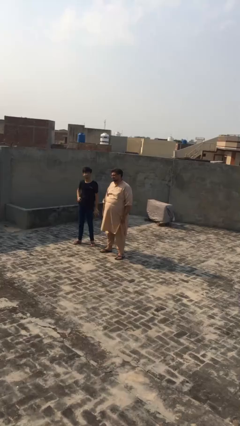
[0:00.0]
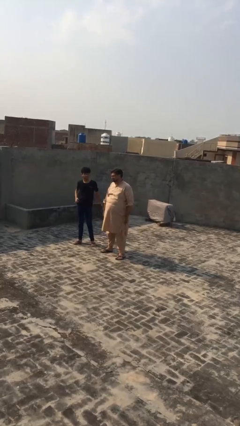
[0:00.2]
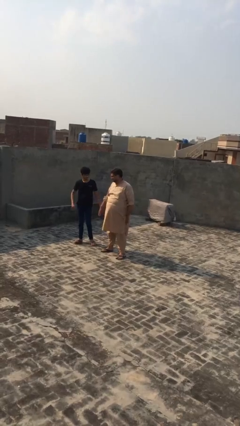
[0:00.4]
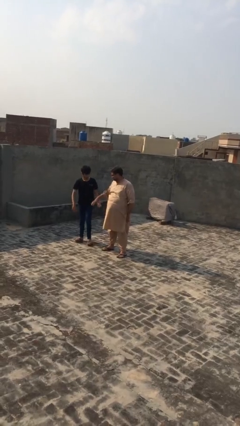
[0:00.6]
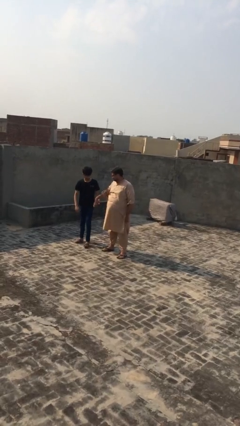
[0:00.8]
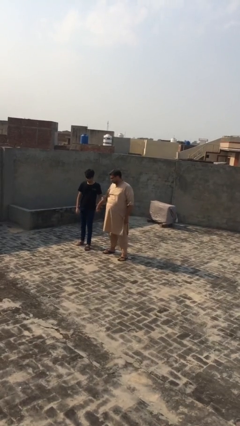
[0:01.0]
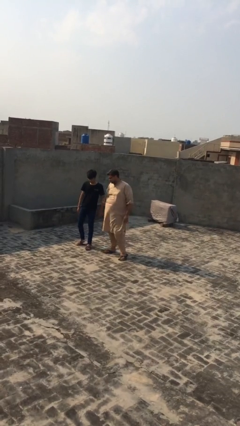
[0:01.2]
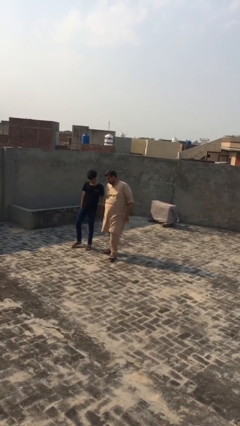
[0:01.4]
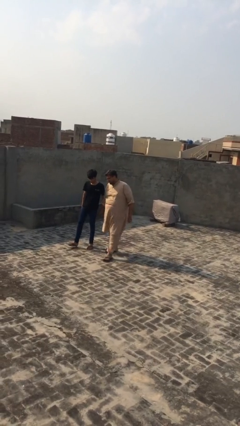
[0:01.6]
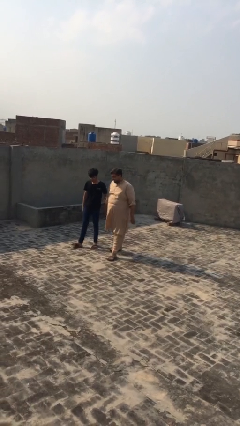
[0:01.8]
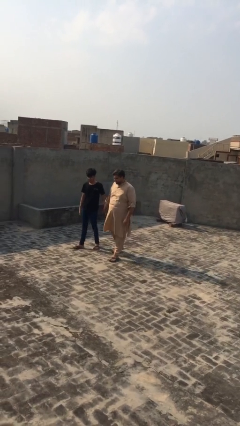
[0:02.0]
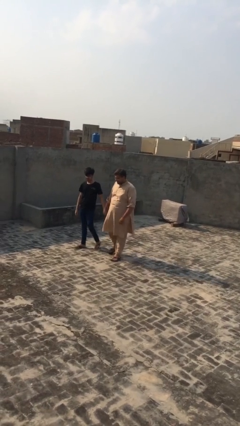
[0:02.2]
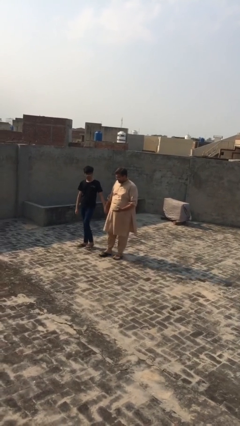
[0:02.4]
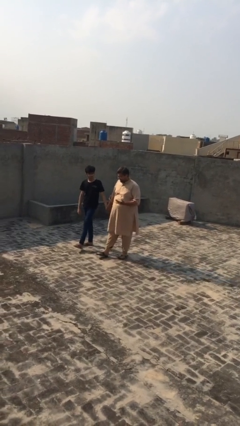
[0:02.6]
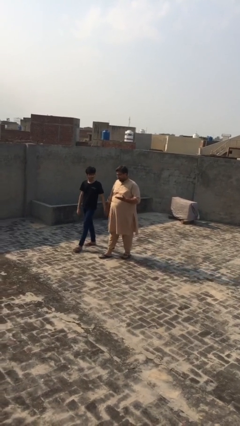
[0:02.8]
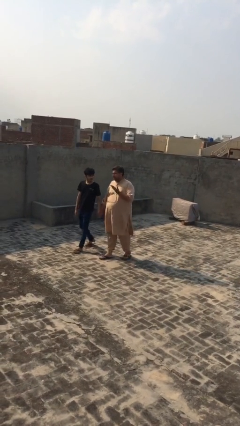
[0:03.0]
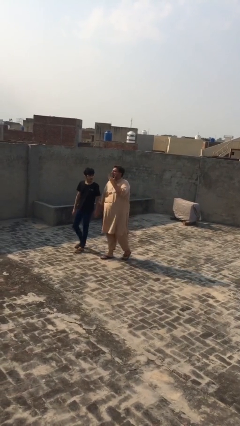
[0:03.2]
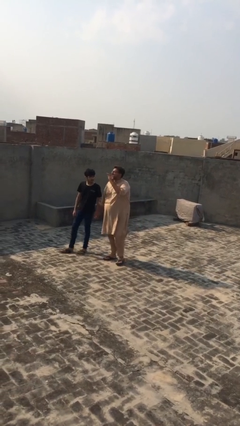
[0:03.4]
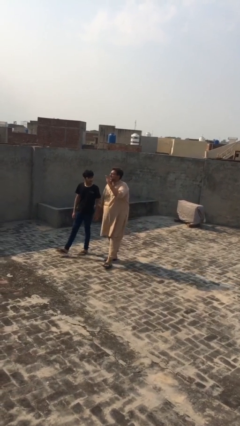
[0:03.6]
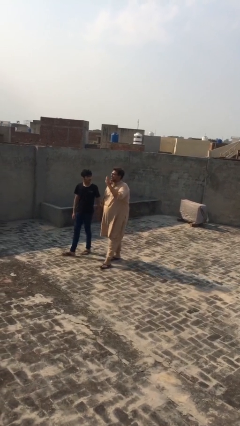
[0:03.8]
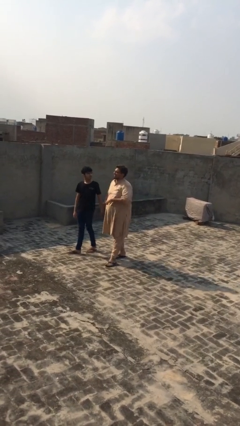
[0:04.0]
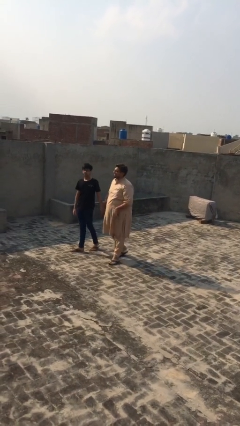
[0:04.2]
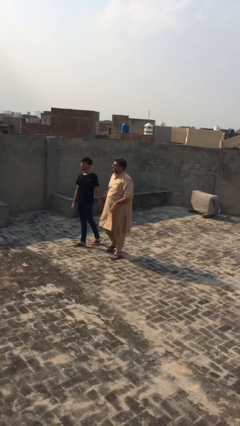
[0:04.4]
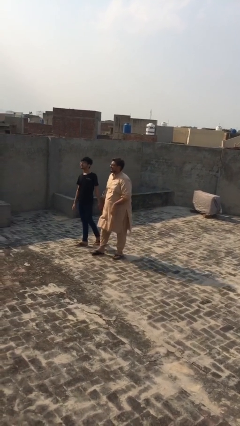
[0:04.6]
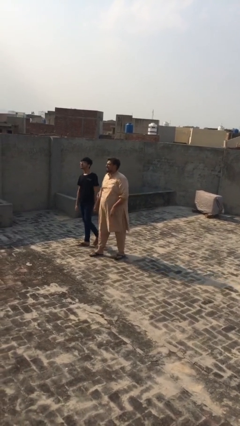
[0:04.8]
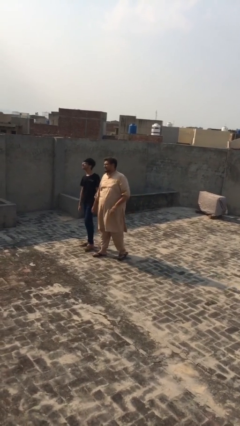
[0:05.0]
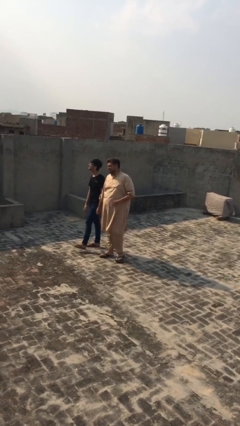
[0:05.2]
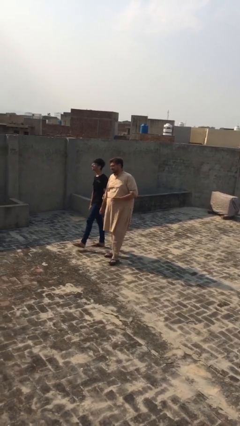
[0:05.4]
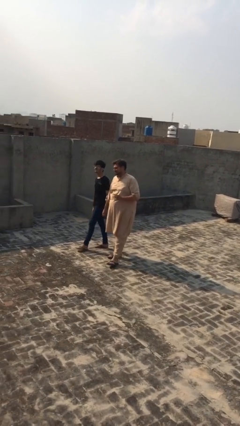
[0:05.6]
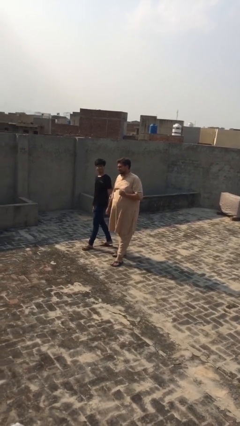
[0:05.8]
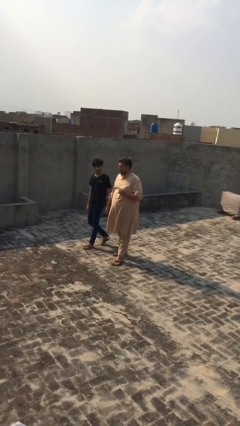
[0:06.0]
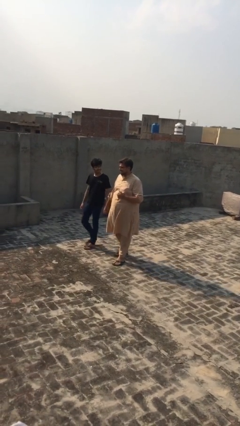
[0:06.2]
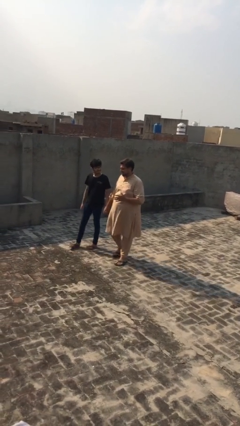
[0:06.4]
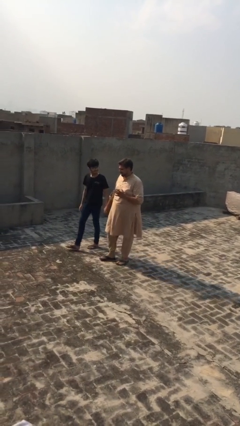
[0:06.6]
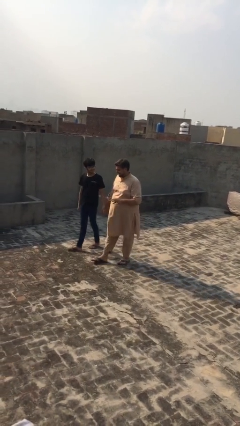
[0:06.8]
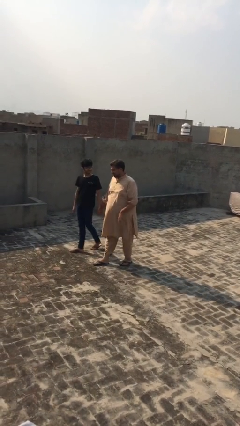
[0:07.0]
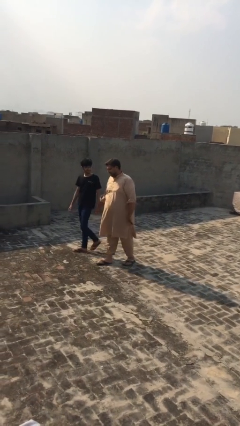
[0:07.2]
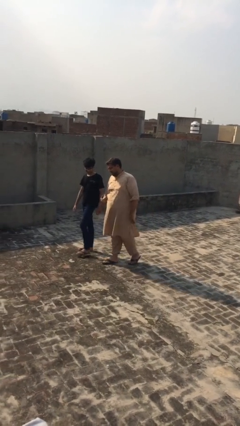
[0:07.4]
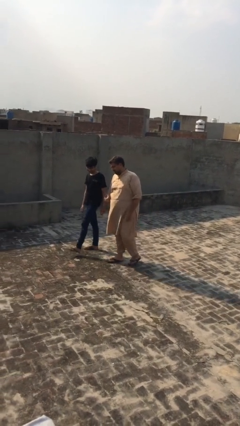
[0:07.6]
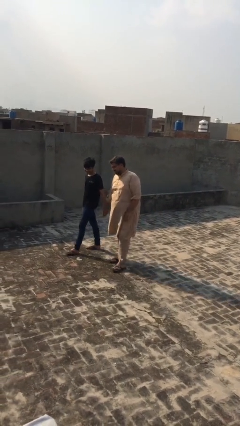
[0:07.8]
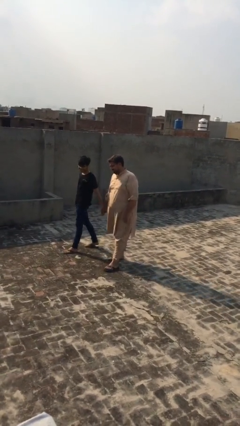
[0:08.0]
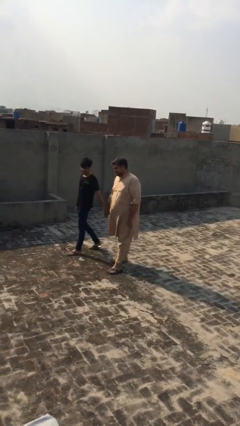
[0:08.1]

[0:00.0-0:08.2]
person holds hand

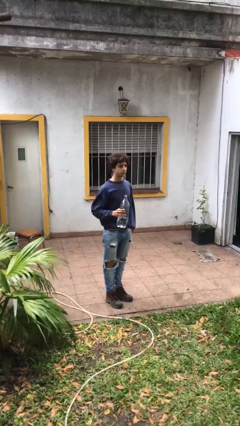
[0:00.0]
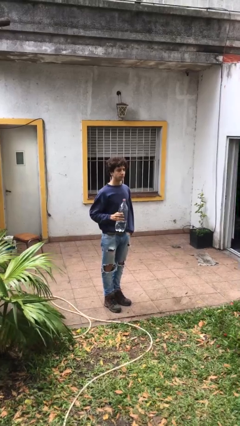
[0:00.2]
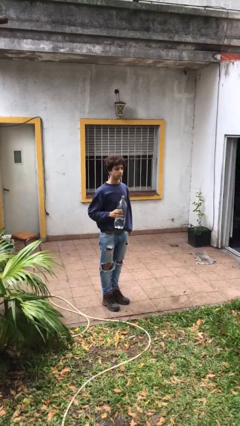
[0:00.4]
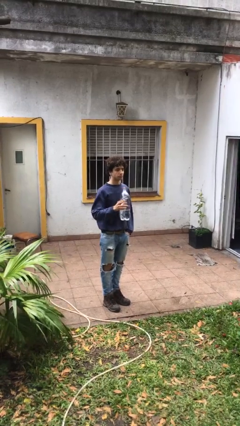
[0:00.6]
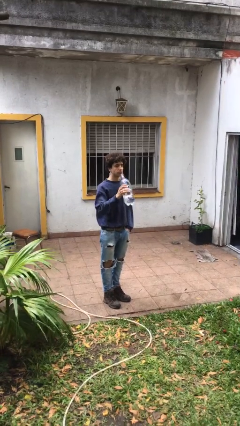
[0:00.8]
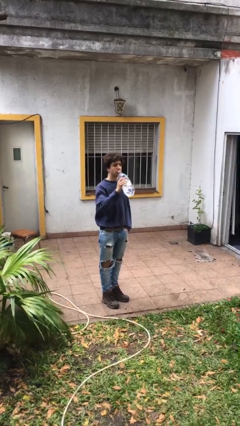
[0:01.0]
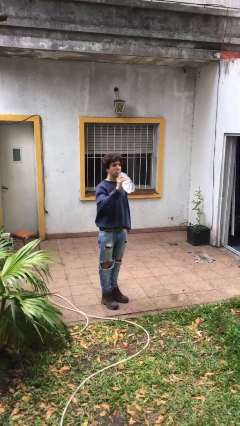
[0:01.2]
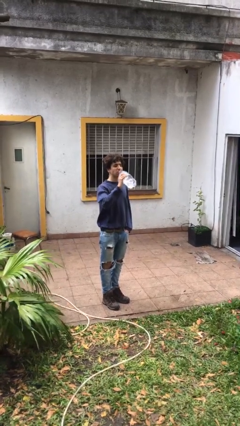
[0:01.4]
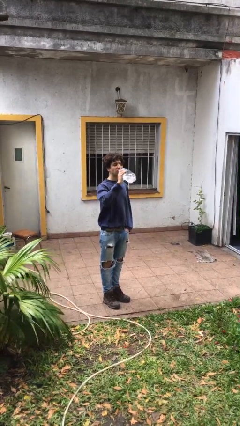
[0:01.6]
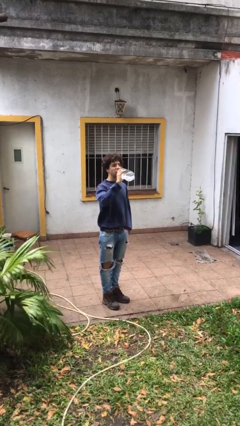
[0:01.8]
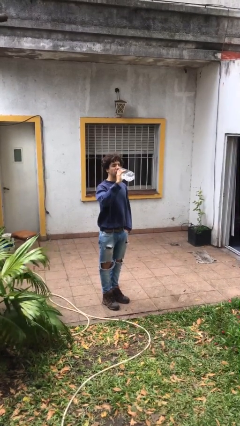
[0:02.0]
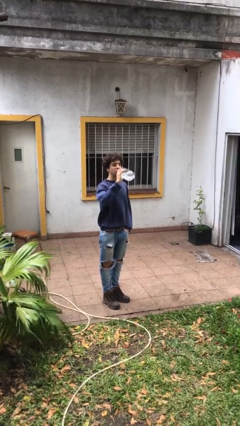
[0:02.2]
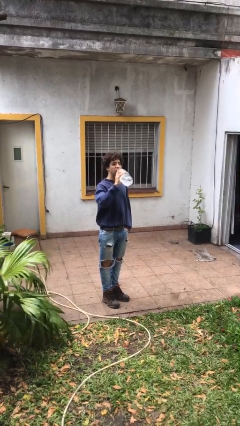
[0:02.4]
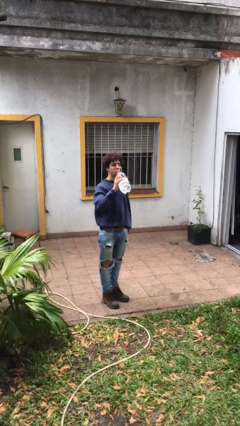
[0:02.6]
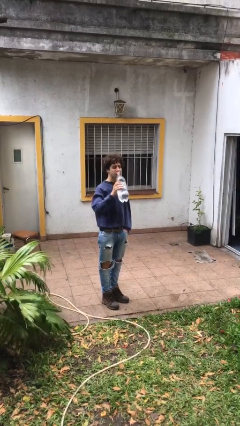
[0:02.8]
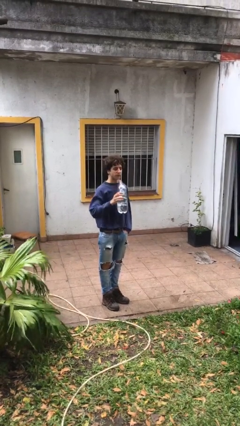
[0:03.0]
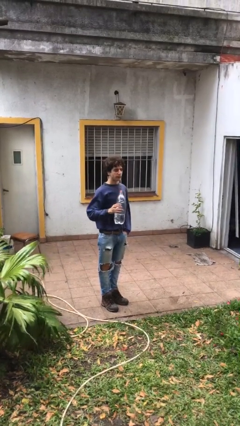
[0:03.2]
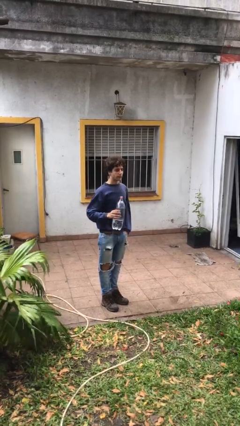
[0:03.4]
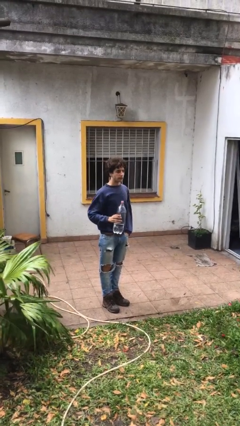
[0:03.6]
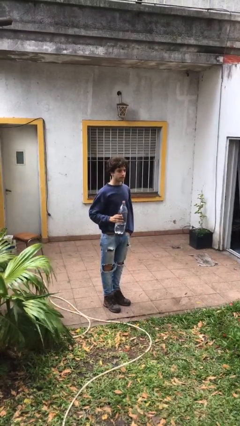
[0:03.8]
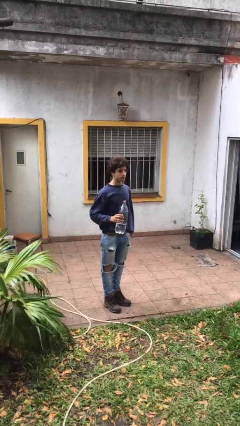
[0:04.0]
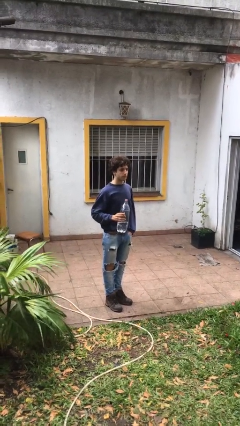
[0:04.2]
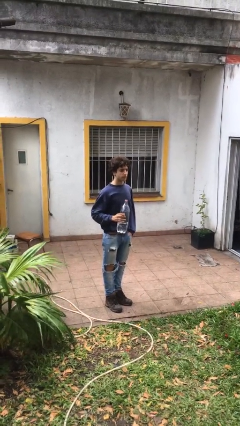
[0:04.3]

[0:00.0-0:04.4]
person drinks from bottle

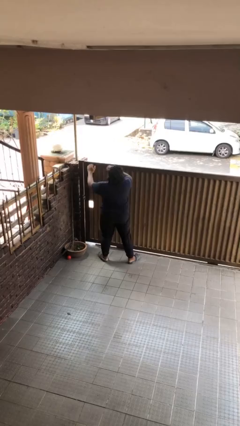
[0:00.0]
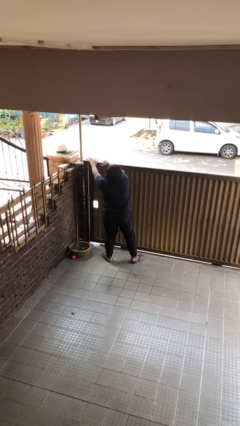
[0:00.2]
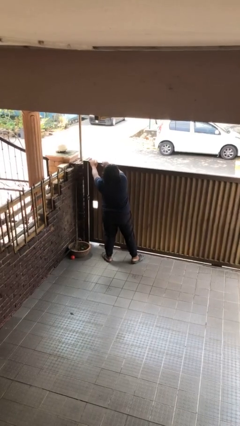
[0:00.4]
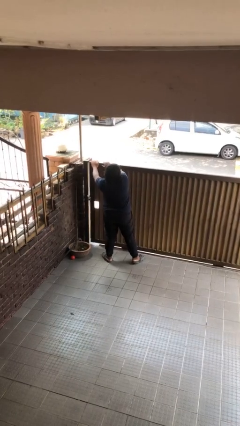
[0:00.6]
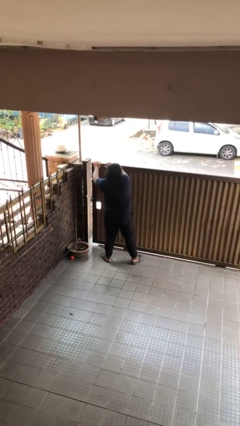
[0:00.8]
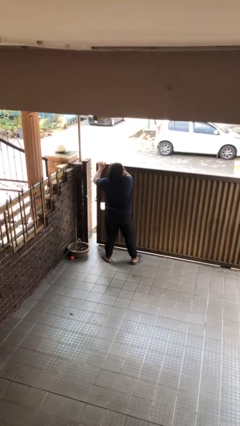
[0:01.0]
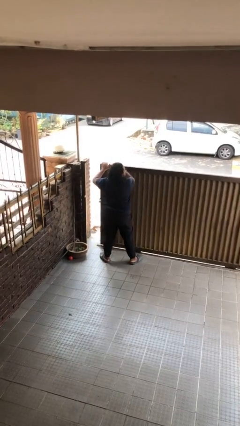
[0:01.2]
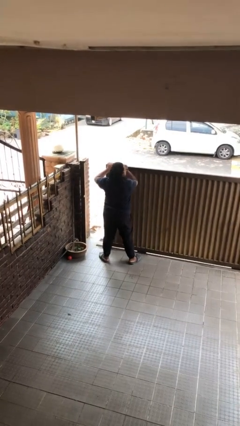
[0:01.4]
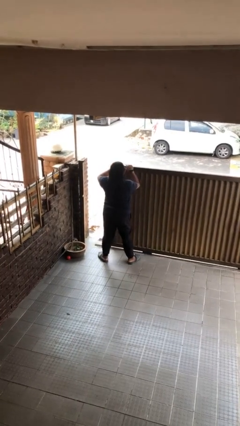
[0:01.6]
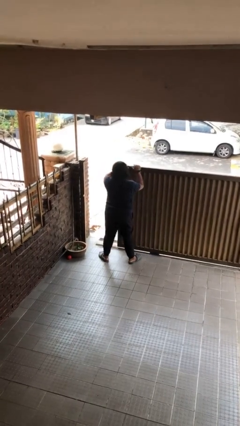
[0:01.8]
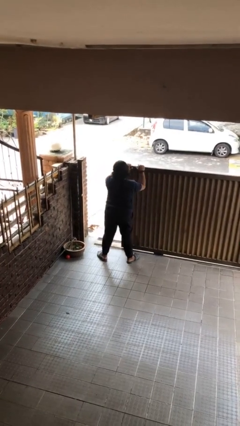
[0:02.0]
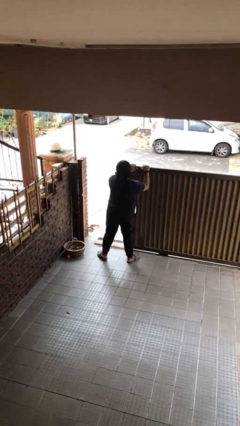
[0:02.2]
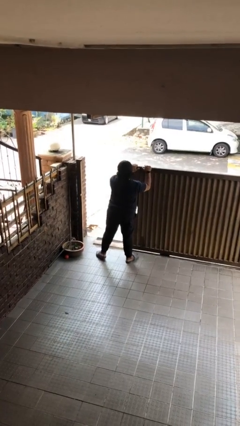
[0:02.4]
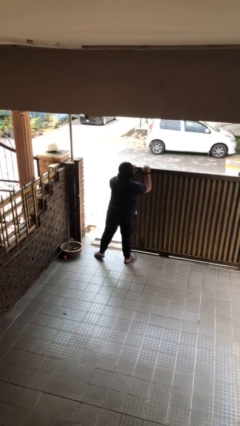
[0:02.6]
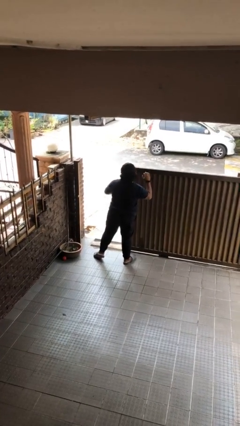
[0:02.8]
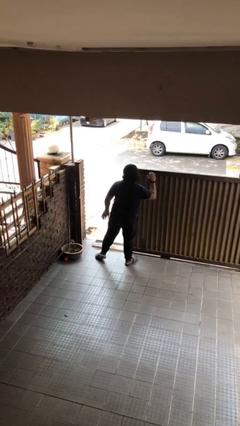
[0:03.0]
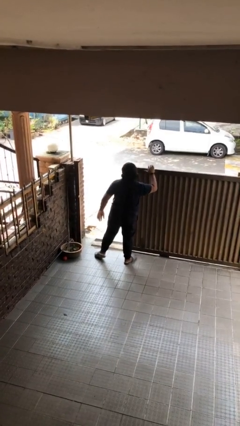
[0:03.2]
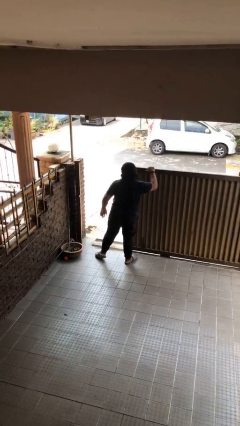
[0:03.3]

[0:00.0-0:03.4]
person opens facility door

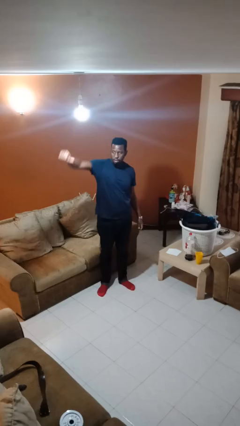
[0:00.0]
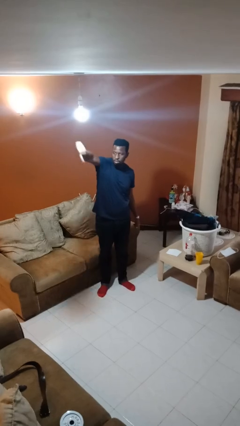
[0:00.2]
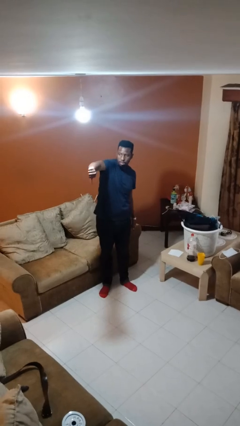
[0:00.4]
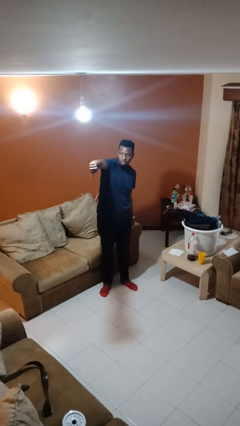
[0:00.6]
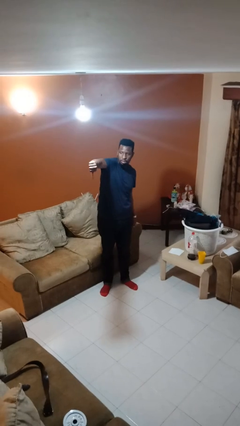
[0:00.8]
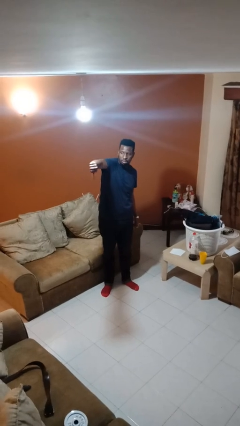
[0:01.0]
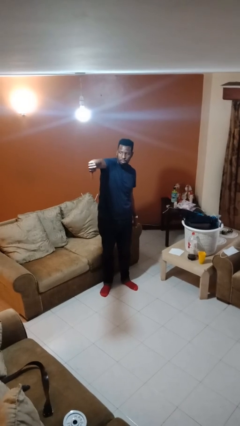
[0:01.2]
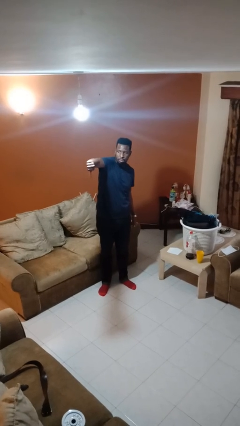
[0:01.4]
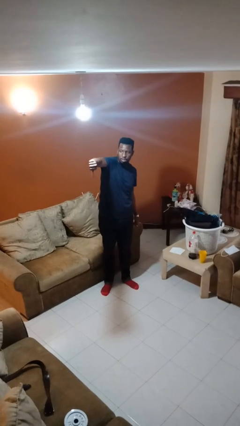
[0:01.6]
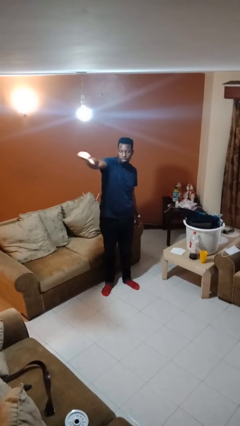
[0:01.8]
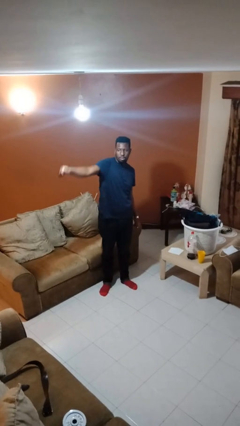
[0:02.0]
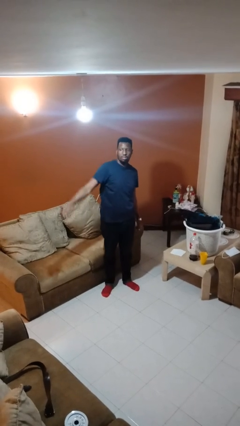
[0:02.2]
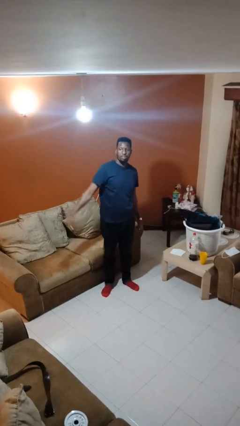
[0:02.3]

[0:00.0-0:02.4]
person gestures thumbs down
